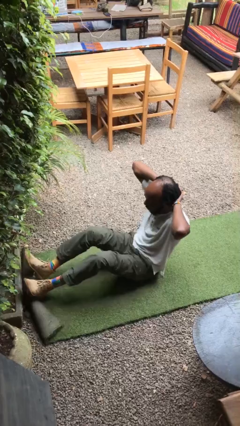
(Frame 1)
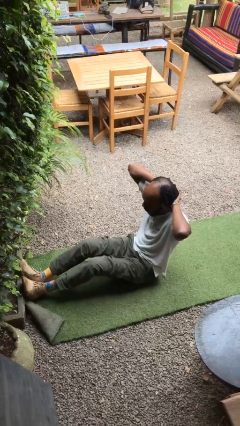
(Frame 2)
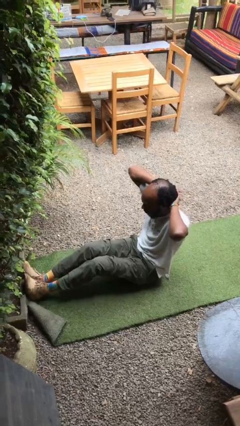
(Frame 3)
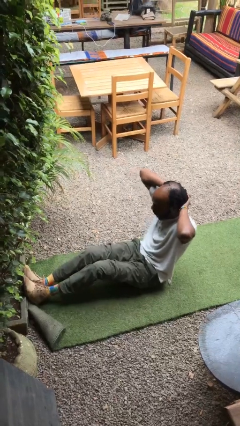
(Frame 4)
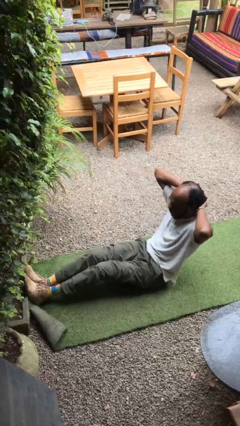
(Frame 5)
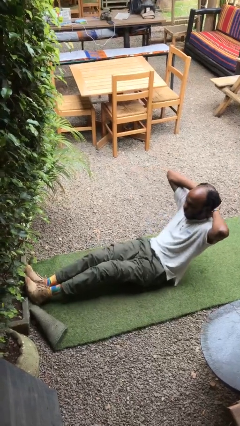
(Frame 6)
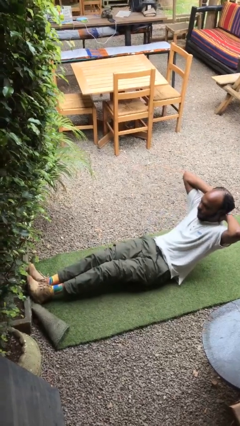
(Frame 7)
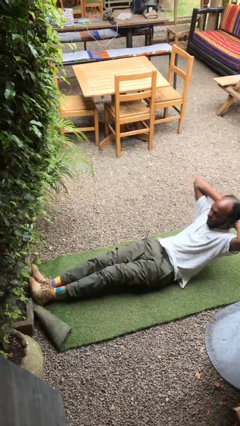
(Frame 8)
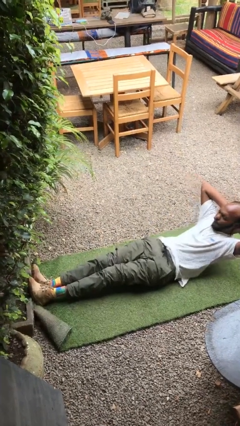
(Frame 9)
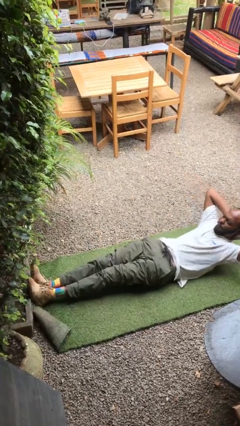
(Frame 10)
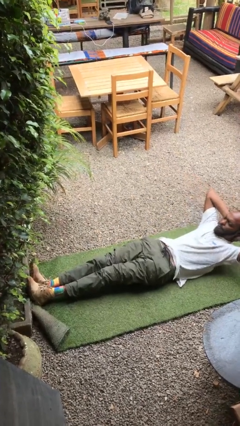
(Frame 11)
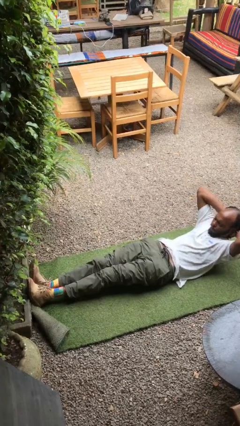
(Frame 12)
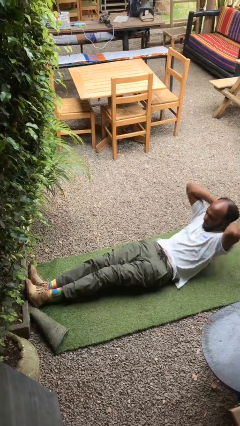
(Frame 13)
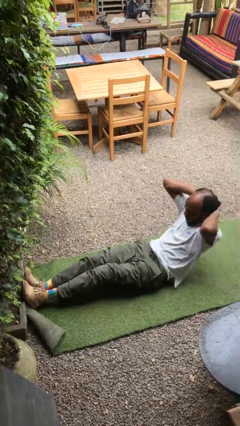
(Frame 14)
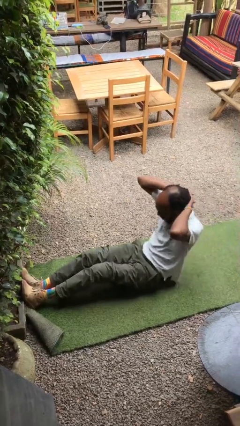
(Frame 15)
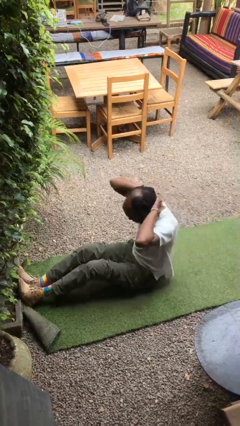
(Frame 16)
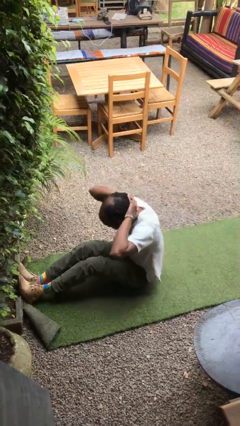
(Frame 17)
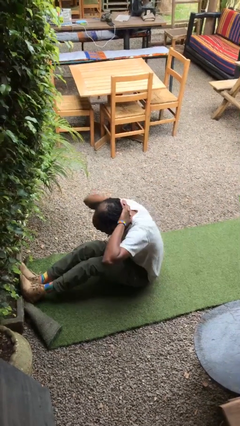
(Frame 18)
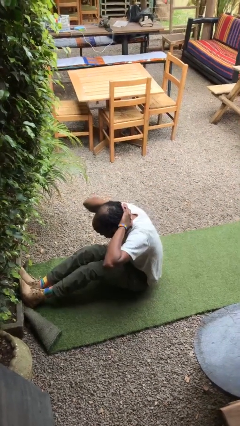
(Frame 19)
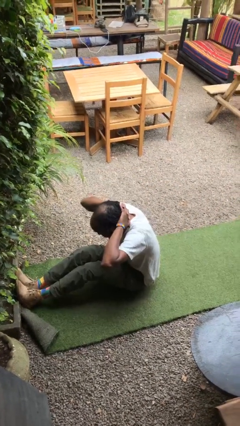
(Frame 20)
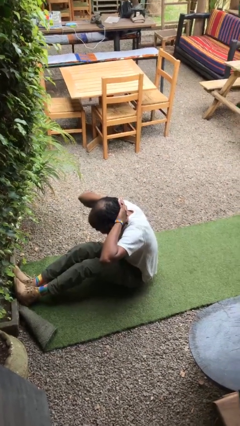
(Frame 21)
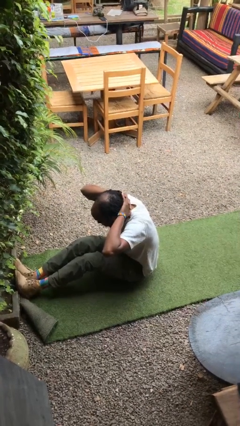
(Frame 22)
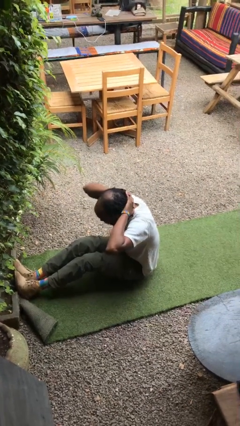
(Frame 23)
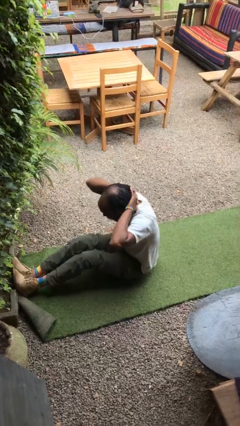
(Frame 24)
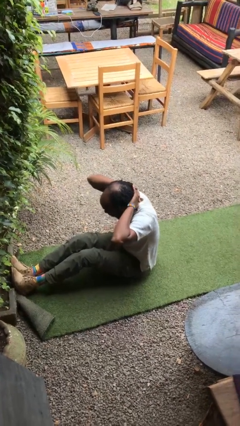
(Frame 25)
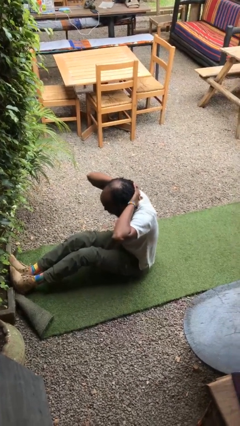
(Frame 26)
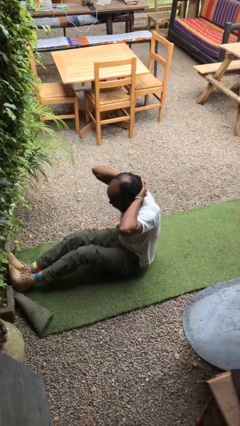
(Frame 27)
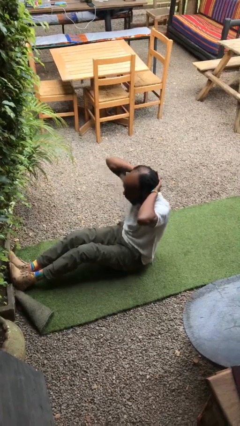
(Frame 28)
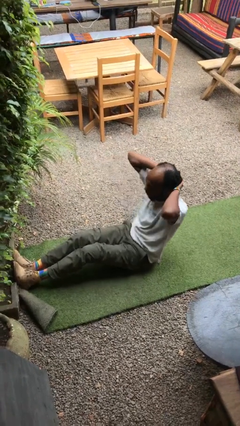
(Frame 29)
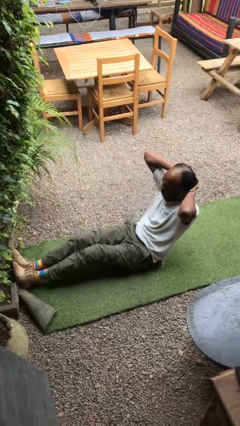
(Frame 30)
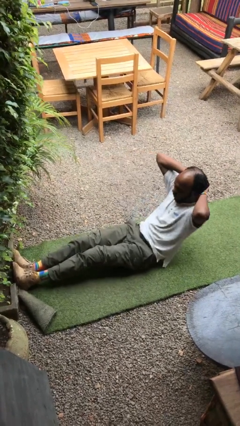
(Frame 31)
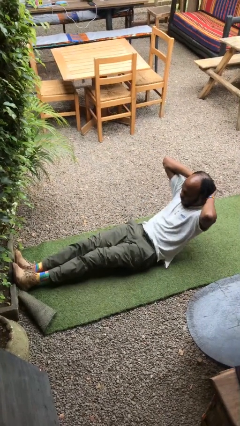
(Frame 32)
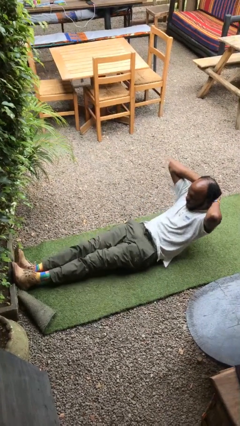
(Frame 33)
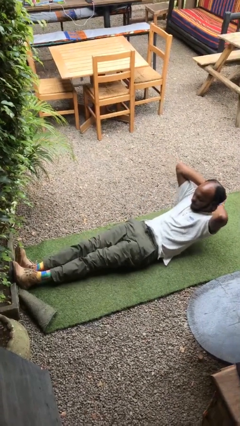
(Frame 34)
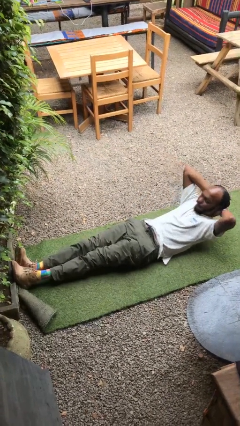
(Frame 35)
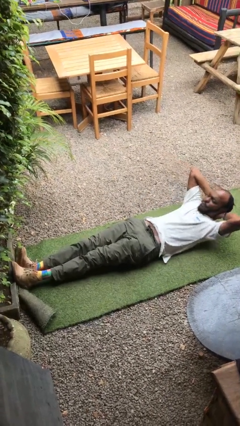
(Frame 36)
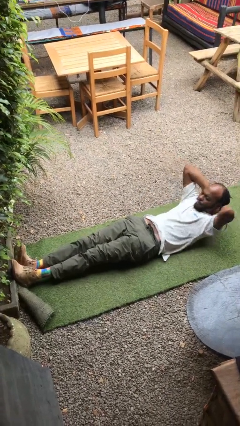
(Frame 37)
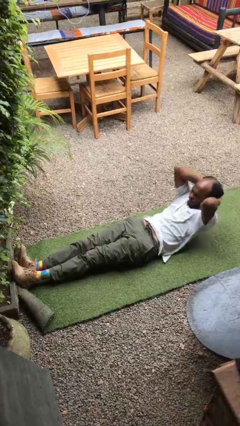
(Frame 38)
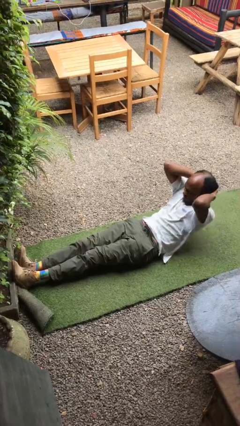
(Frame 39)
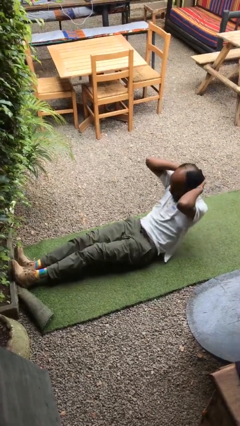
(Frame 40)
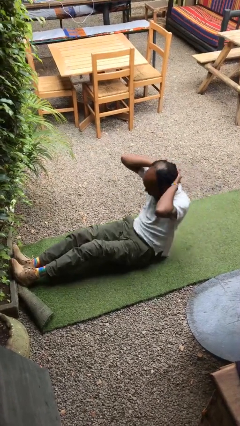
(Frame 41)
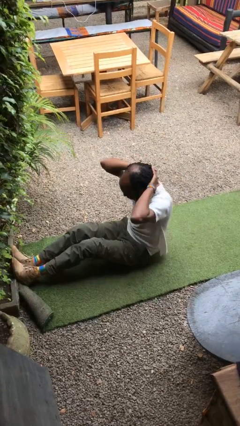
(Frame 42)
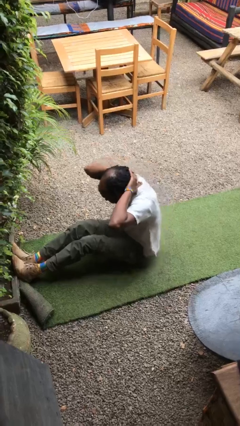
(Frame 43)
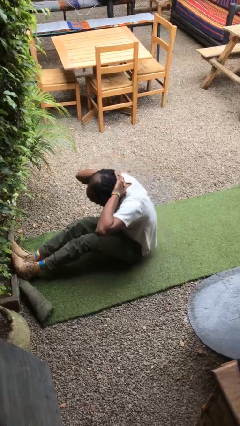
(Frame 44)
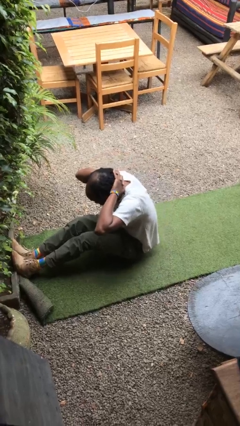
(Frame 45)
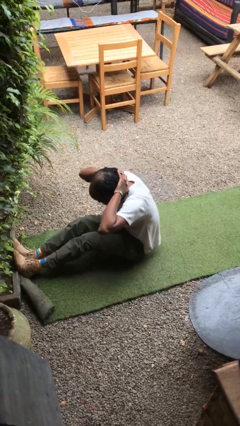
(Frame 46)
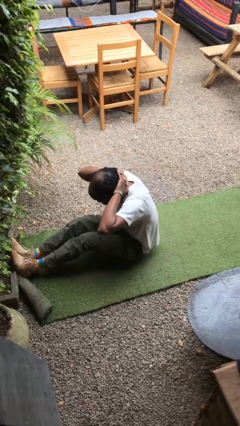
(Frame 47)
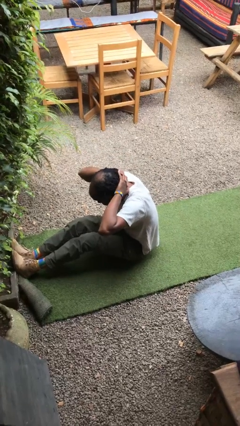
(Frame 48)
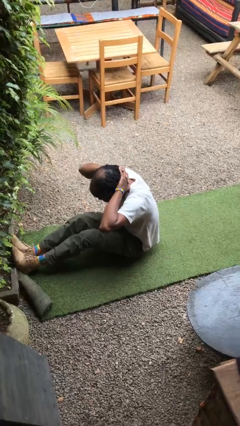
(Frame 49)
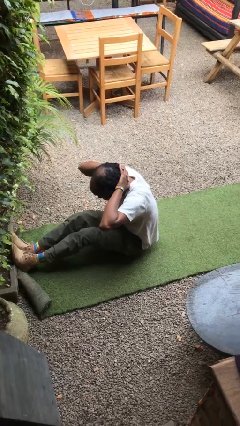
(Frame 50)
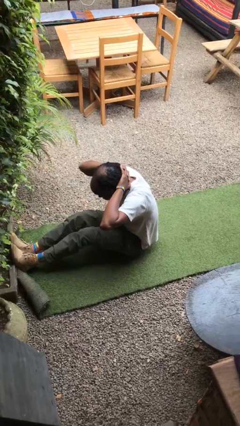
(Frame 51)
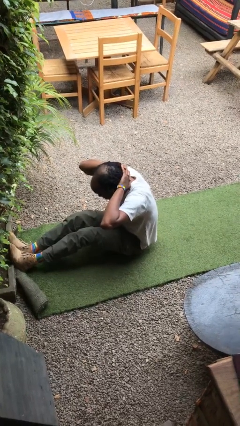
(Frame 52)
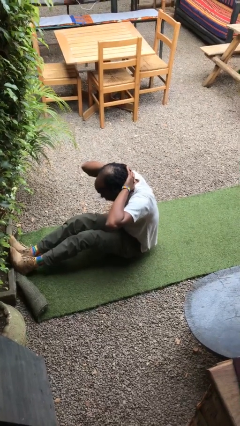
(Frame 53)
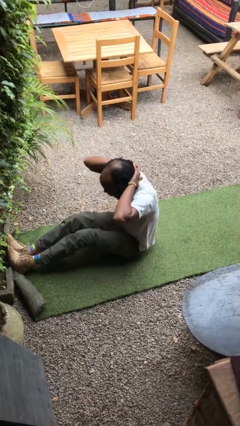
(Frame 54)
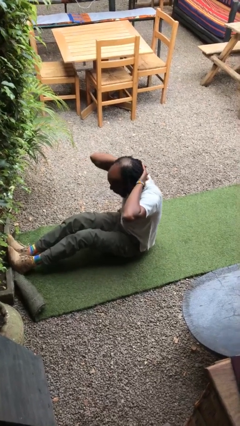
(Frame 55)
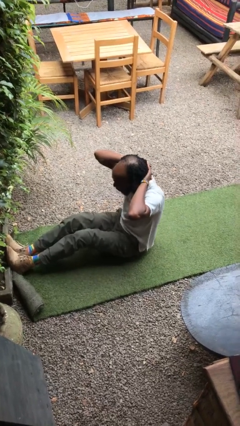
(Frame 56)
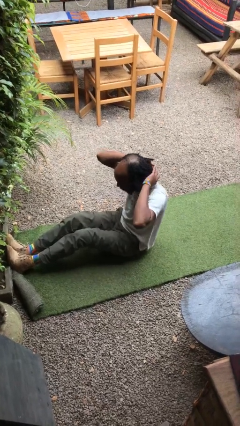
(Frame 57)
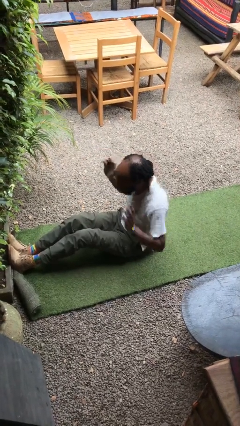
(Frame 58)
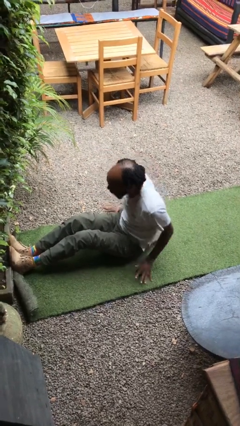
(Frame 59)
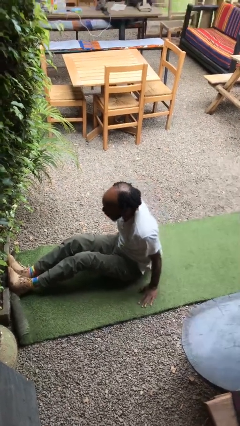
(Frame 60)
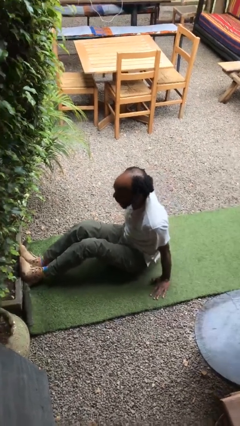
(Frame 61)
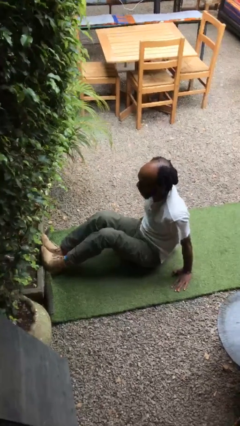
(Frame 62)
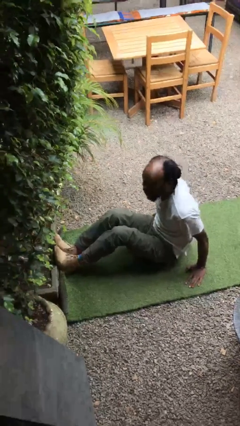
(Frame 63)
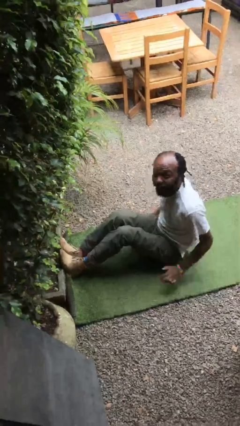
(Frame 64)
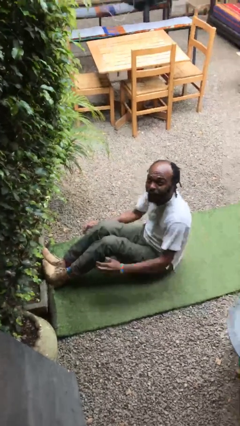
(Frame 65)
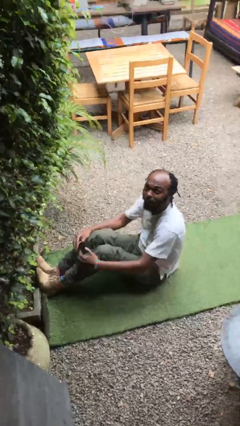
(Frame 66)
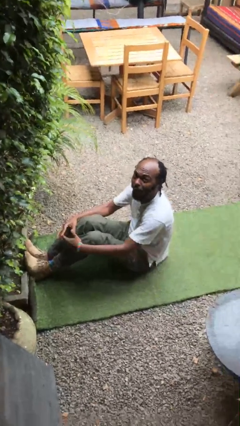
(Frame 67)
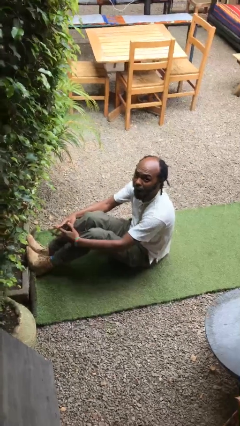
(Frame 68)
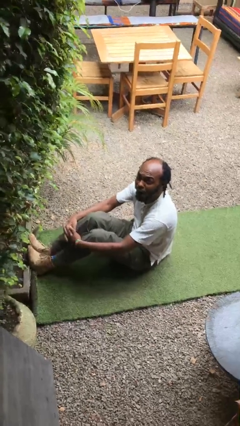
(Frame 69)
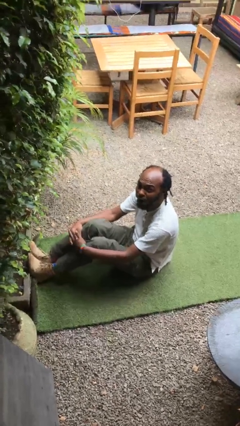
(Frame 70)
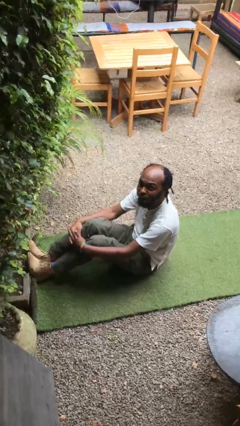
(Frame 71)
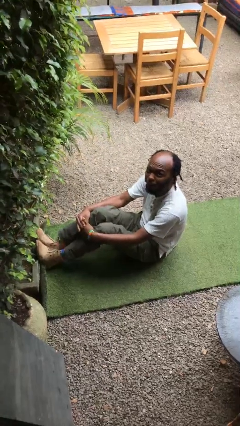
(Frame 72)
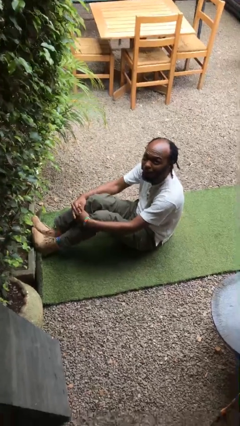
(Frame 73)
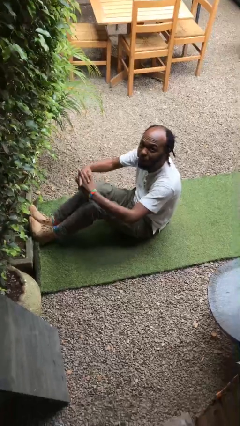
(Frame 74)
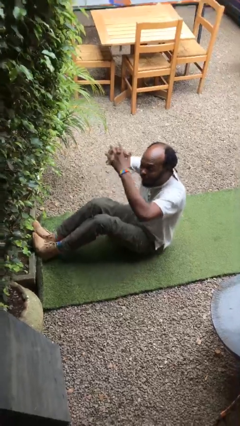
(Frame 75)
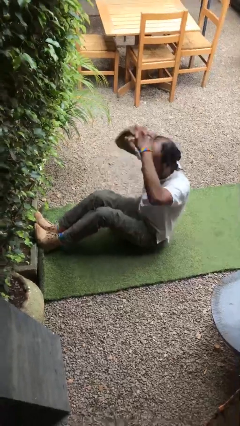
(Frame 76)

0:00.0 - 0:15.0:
person exercises with situp

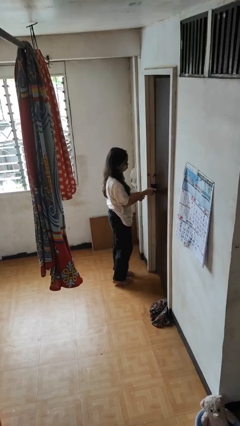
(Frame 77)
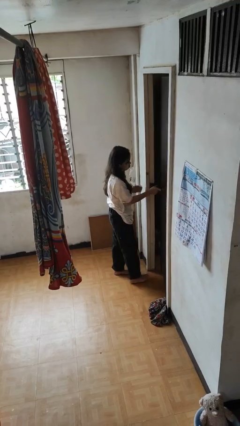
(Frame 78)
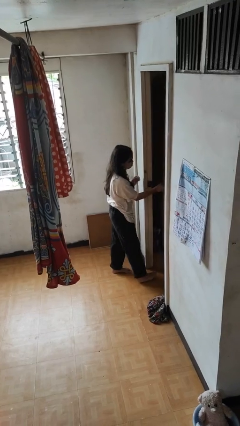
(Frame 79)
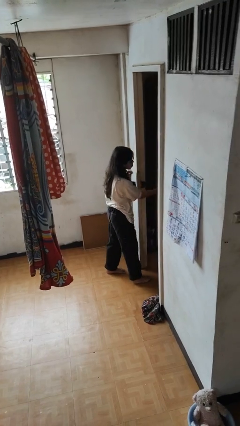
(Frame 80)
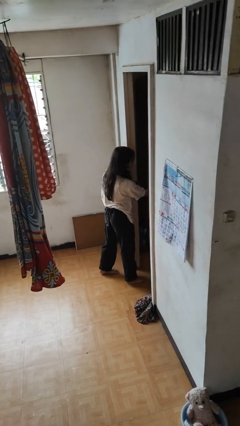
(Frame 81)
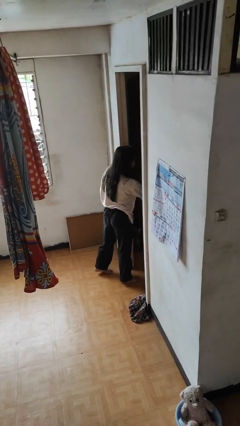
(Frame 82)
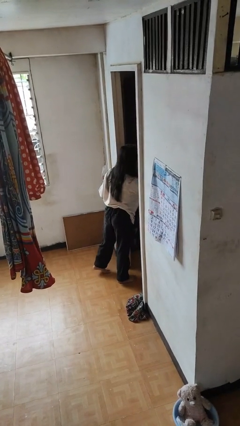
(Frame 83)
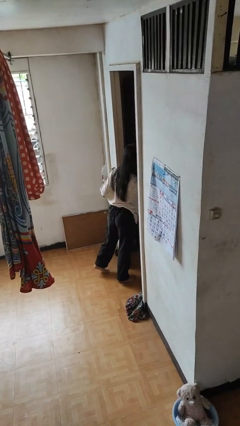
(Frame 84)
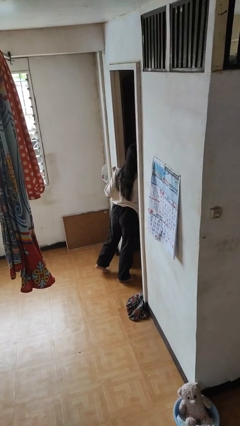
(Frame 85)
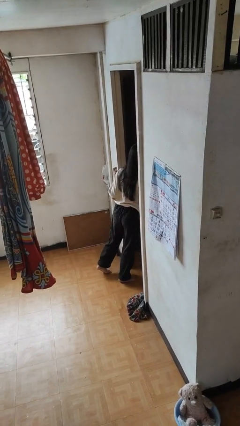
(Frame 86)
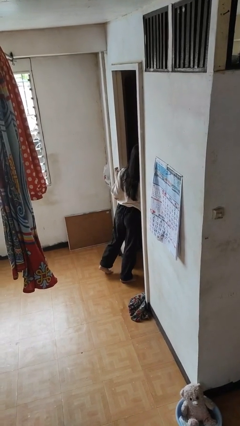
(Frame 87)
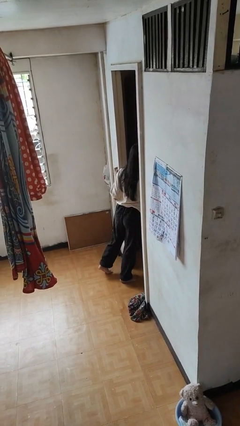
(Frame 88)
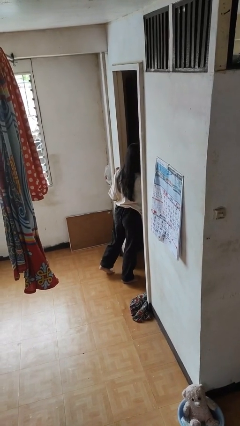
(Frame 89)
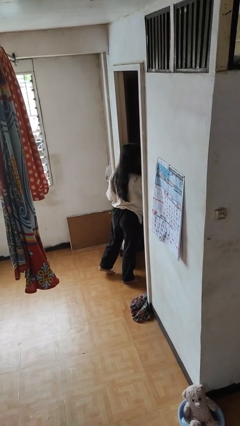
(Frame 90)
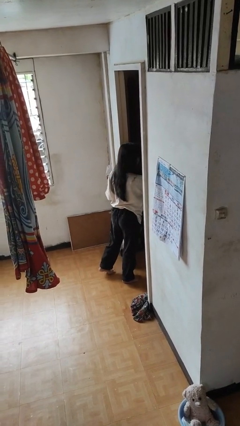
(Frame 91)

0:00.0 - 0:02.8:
person opens facility door

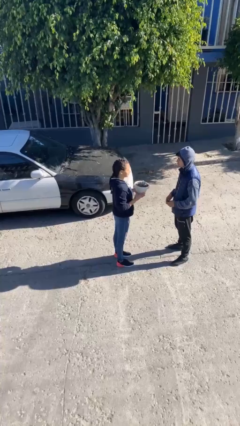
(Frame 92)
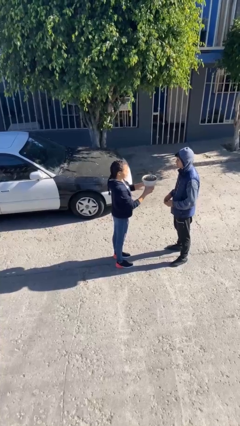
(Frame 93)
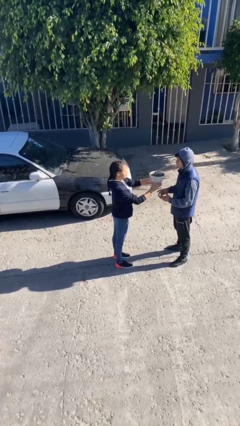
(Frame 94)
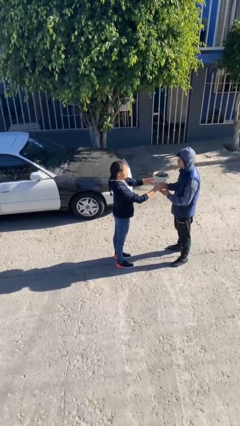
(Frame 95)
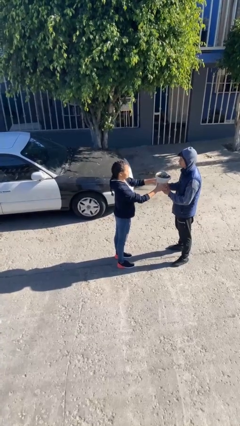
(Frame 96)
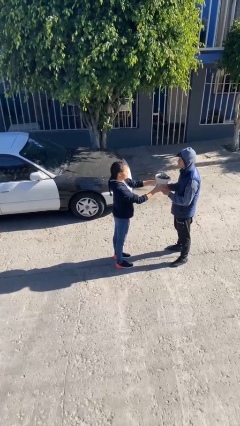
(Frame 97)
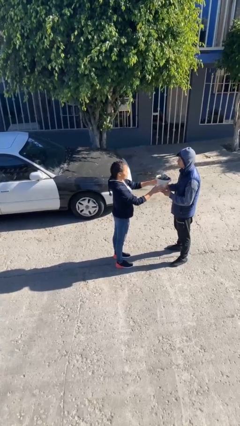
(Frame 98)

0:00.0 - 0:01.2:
person transfers object to person
